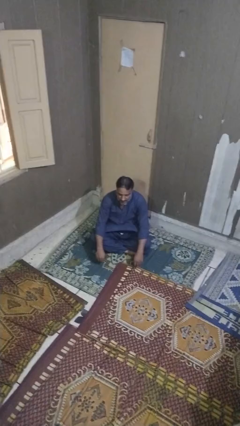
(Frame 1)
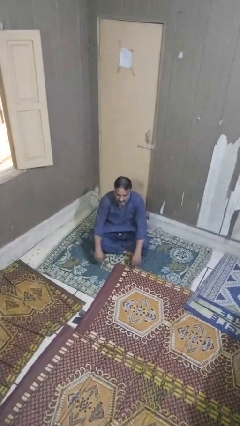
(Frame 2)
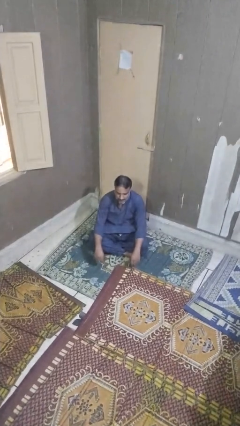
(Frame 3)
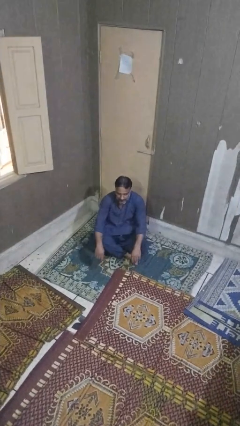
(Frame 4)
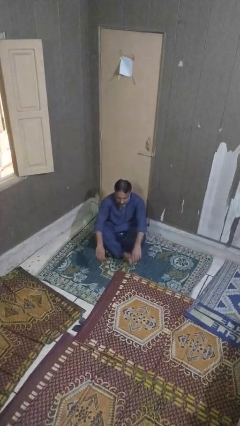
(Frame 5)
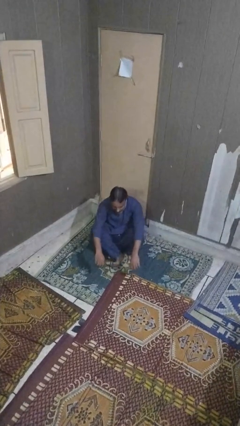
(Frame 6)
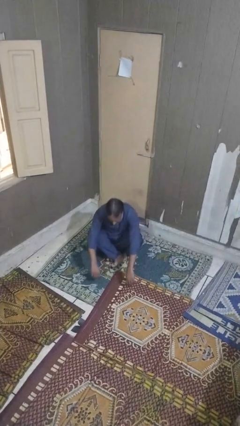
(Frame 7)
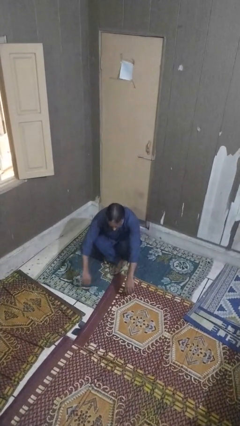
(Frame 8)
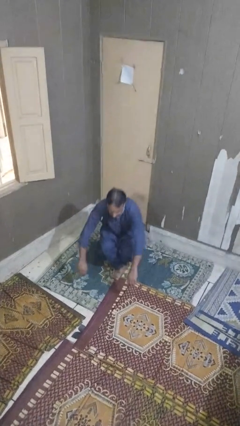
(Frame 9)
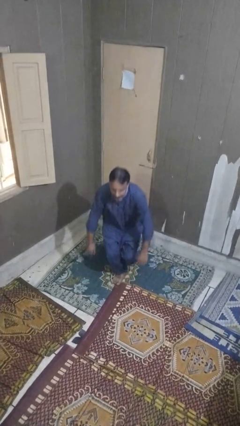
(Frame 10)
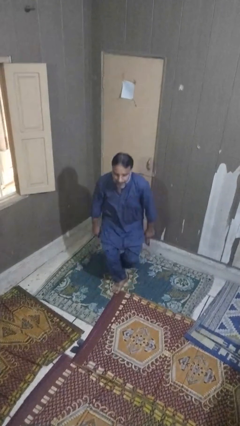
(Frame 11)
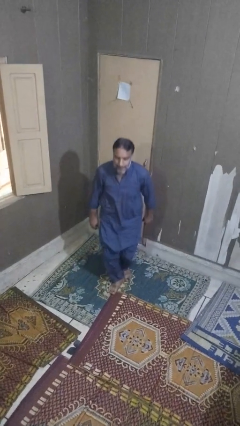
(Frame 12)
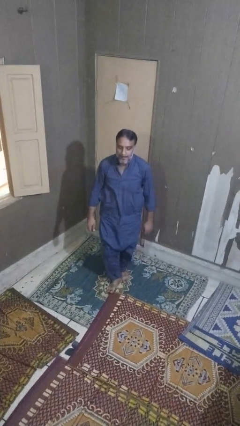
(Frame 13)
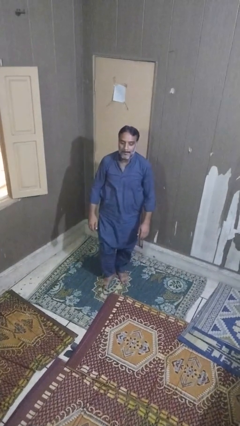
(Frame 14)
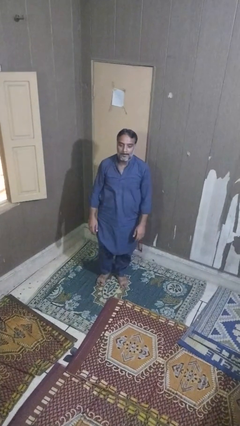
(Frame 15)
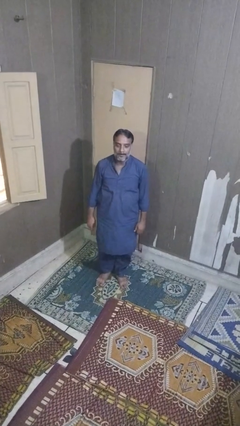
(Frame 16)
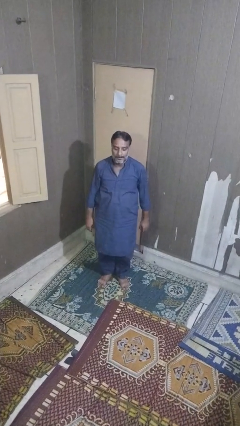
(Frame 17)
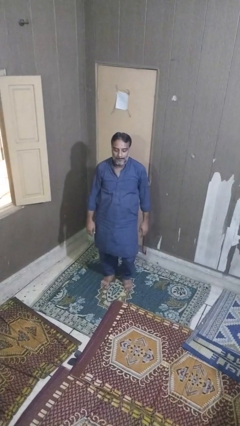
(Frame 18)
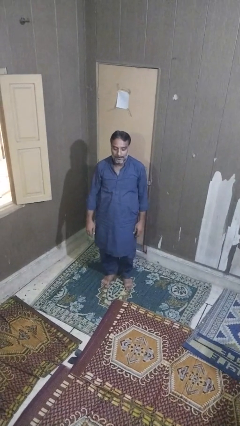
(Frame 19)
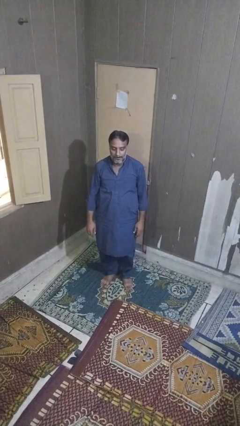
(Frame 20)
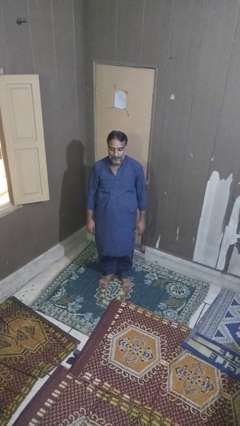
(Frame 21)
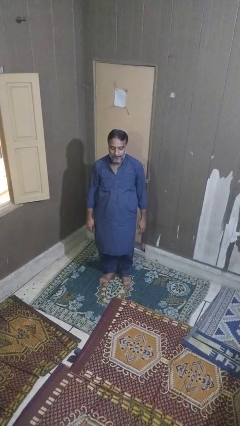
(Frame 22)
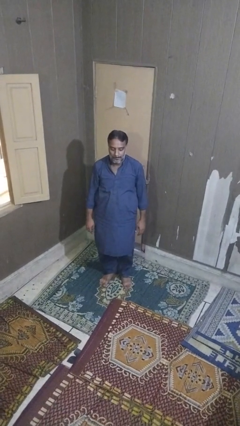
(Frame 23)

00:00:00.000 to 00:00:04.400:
person stands up from floor

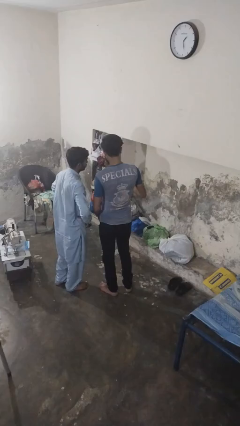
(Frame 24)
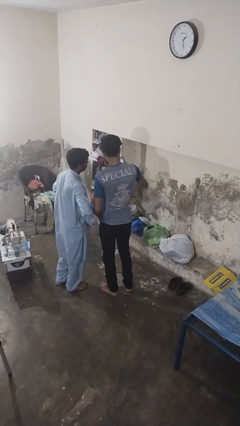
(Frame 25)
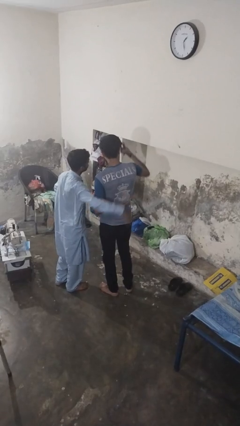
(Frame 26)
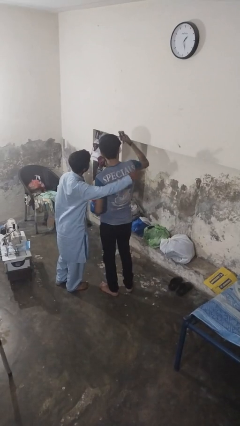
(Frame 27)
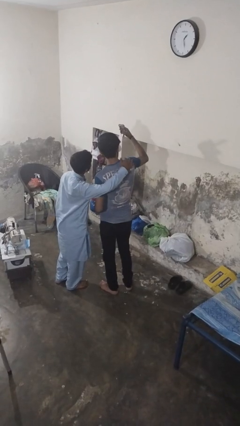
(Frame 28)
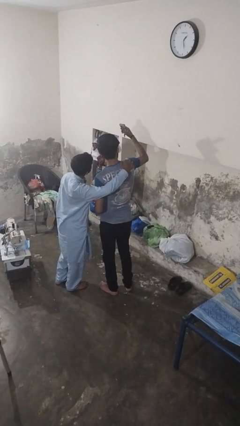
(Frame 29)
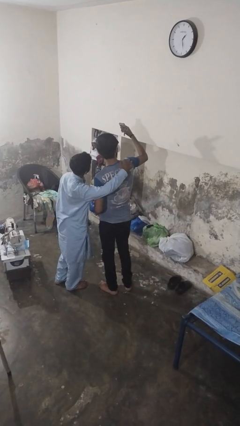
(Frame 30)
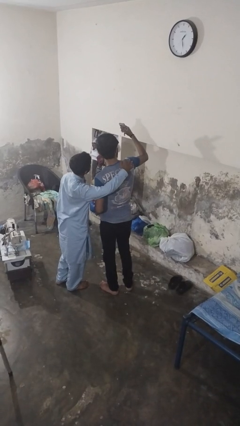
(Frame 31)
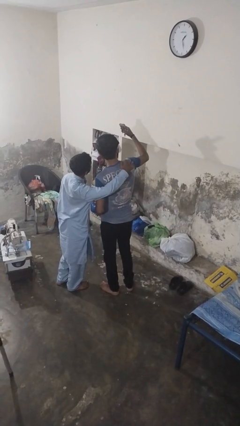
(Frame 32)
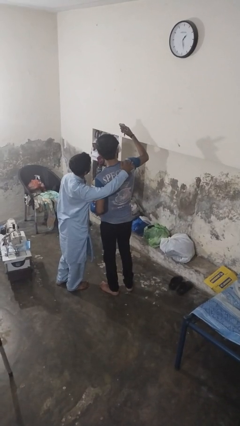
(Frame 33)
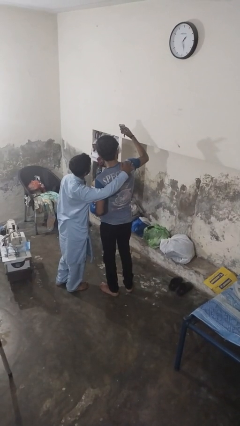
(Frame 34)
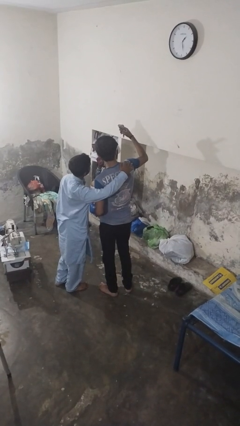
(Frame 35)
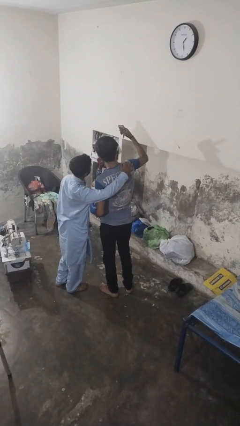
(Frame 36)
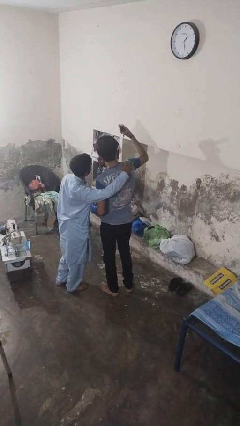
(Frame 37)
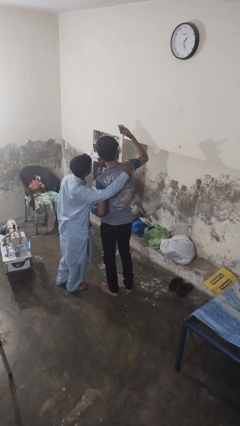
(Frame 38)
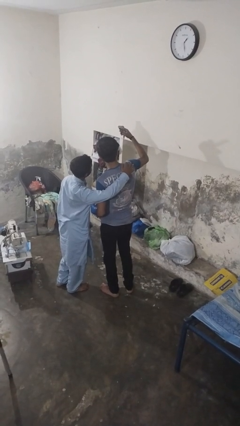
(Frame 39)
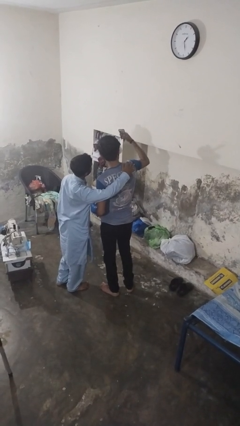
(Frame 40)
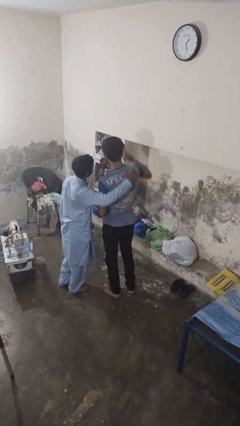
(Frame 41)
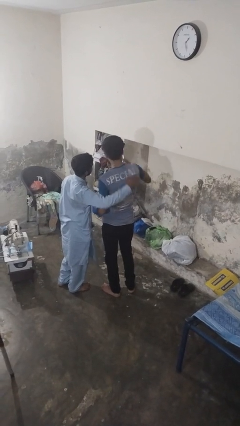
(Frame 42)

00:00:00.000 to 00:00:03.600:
person takes selfie with person

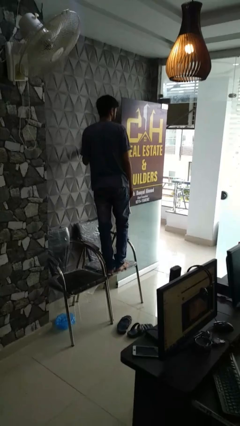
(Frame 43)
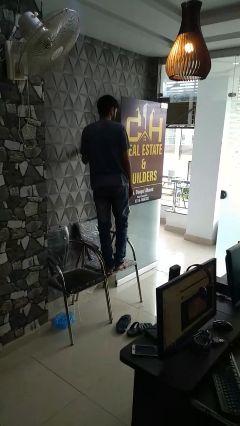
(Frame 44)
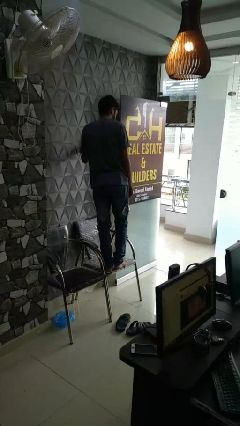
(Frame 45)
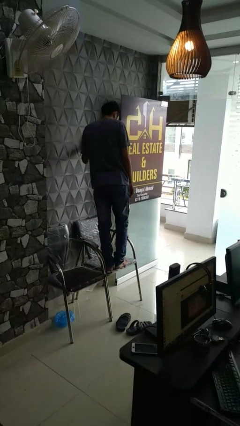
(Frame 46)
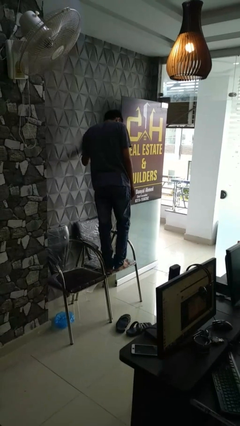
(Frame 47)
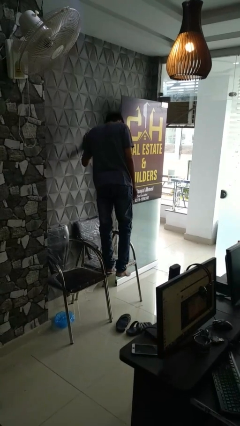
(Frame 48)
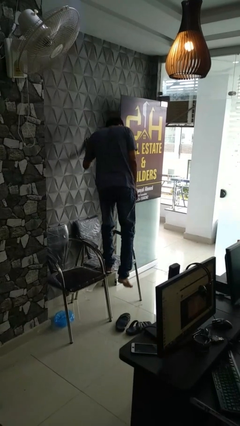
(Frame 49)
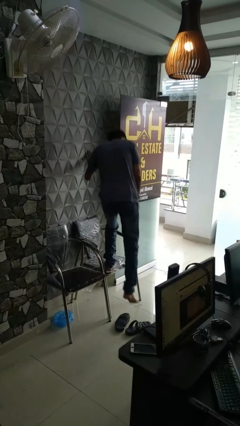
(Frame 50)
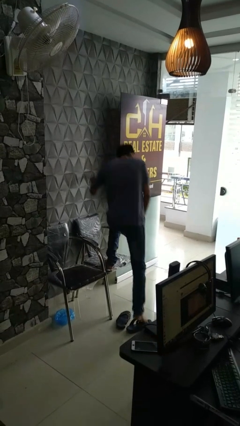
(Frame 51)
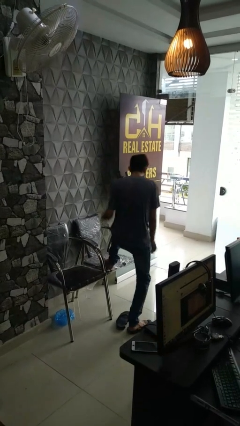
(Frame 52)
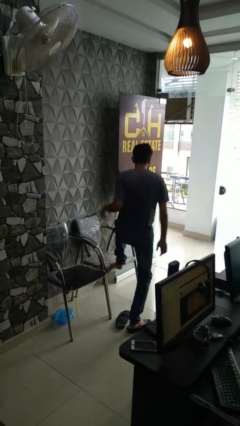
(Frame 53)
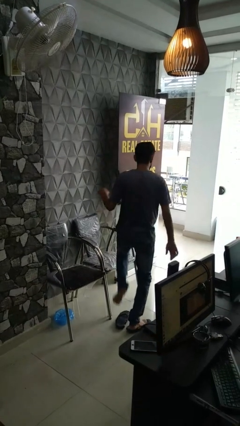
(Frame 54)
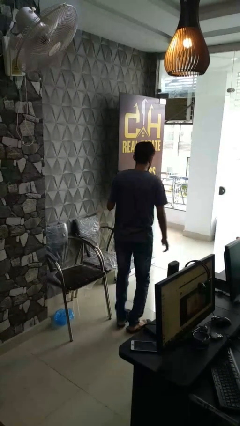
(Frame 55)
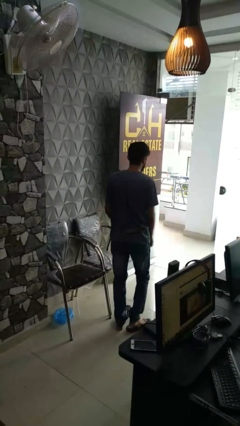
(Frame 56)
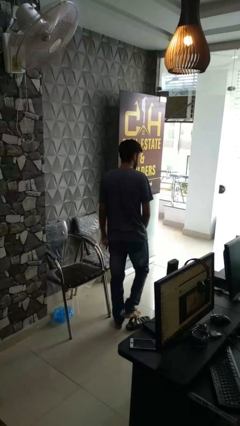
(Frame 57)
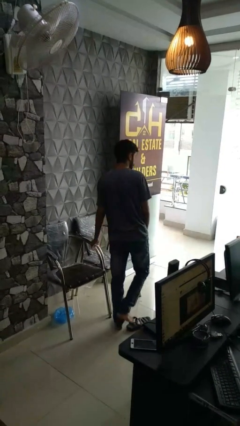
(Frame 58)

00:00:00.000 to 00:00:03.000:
person climbs off chair

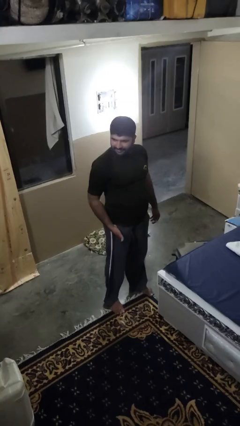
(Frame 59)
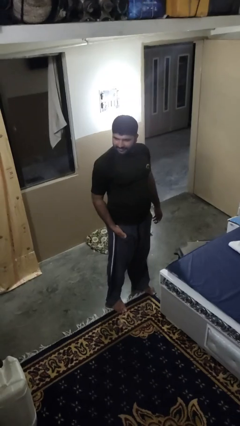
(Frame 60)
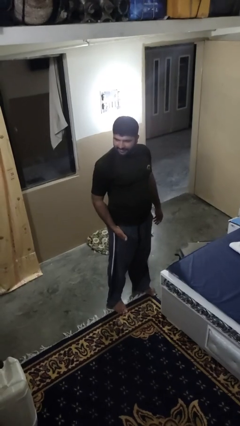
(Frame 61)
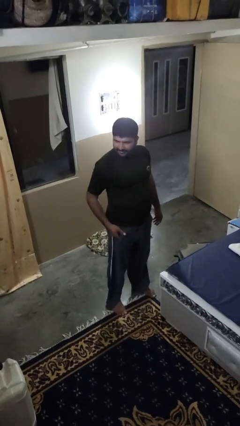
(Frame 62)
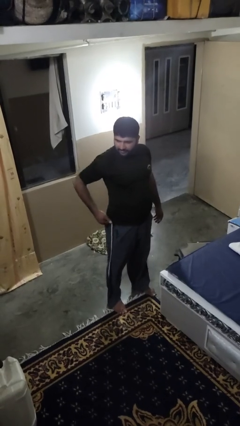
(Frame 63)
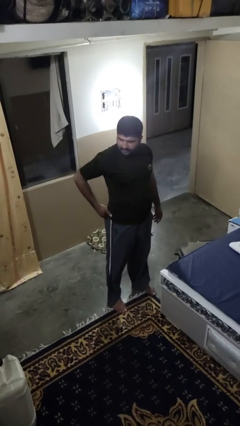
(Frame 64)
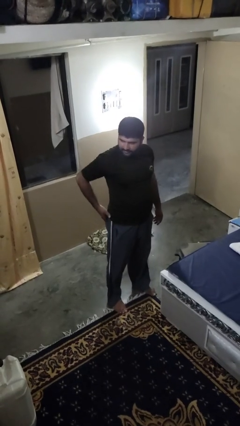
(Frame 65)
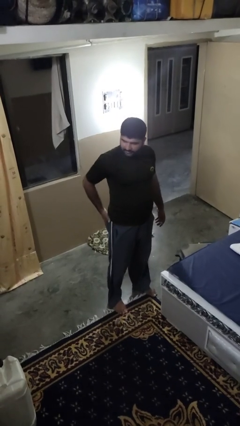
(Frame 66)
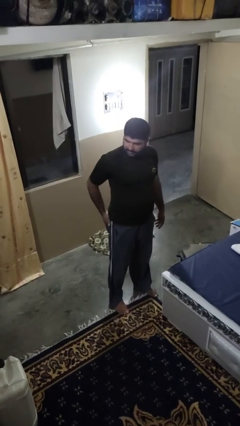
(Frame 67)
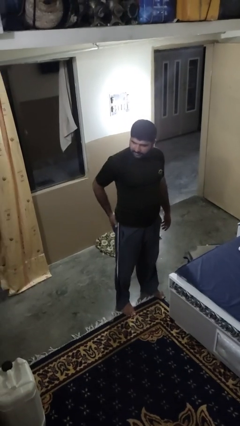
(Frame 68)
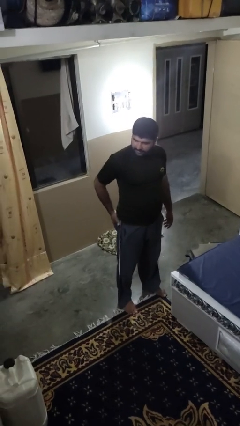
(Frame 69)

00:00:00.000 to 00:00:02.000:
person puts hands in back pockets

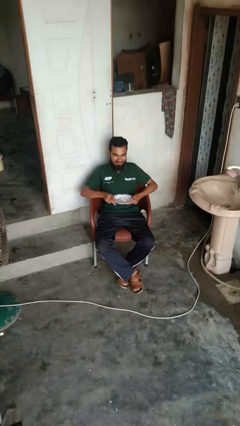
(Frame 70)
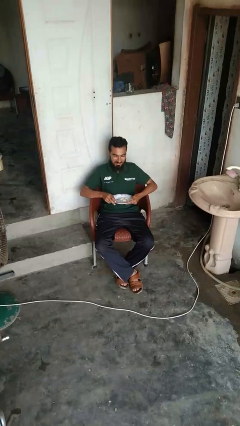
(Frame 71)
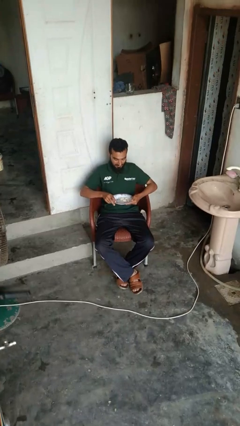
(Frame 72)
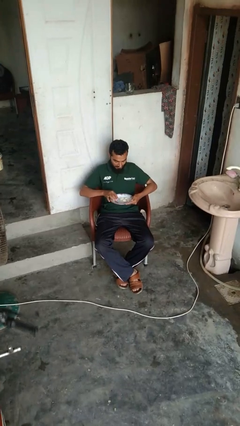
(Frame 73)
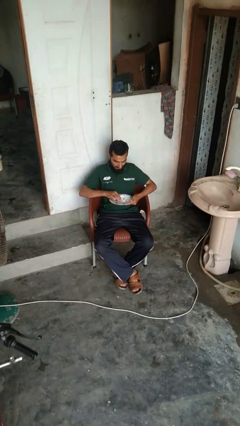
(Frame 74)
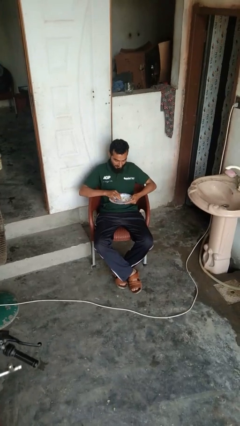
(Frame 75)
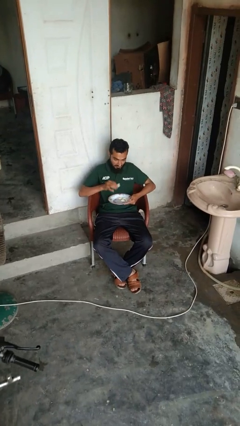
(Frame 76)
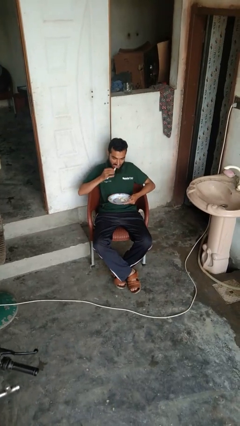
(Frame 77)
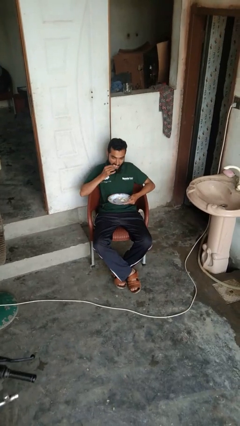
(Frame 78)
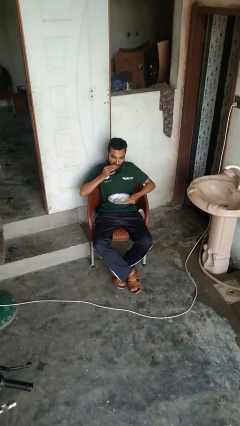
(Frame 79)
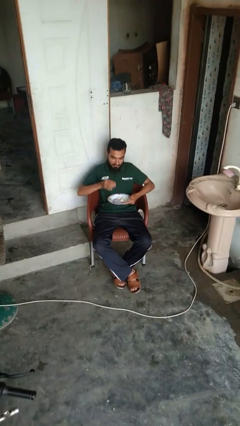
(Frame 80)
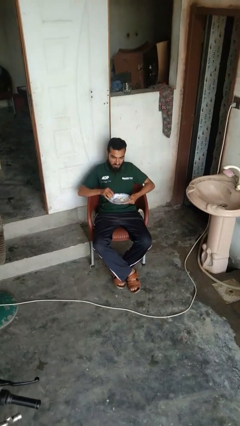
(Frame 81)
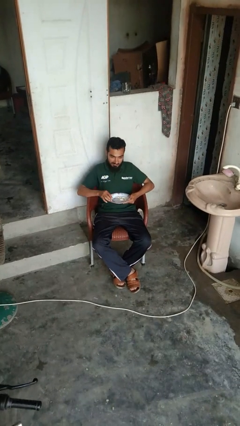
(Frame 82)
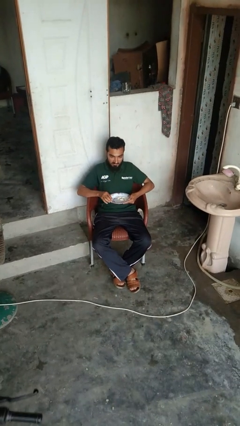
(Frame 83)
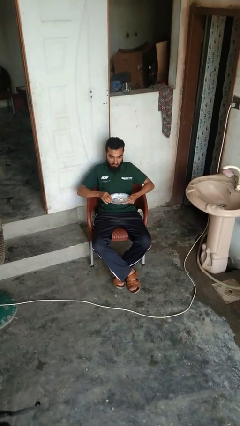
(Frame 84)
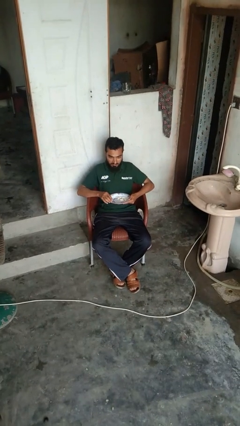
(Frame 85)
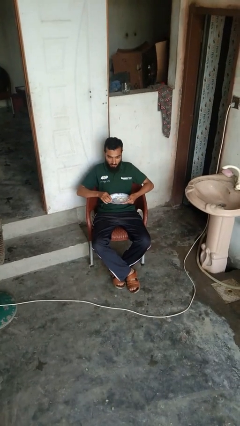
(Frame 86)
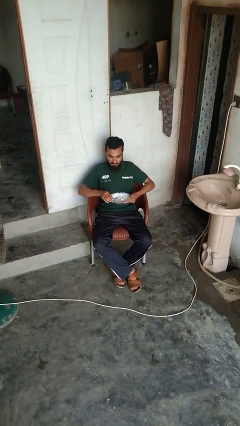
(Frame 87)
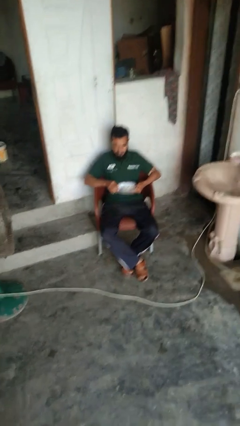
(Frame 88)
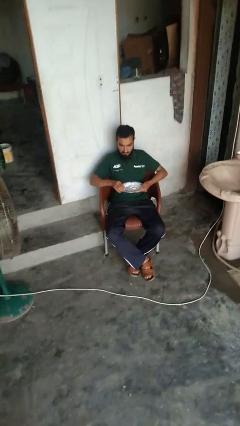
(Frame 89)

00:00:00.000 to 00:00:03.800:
person eats with hands

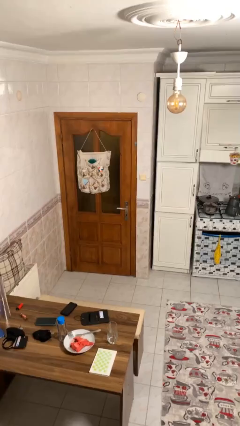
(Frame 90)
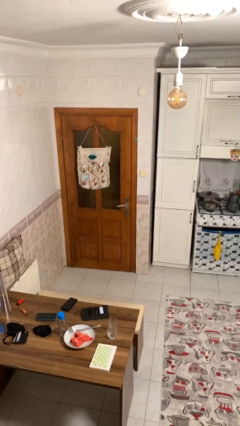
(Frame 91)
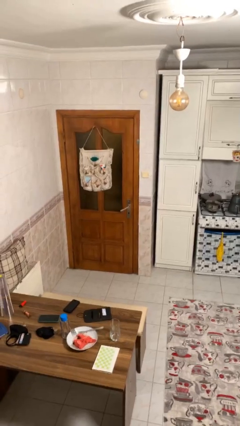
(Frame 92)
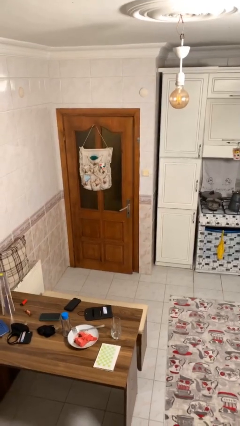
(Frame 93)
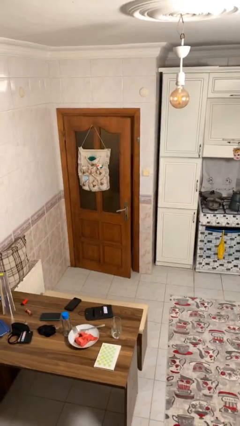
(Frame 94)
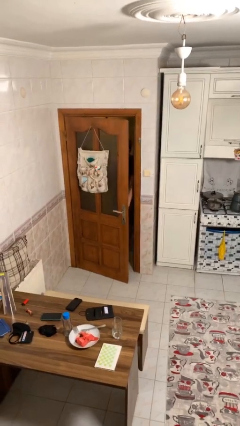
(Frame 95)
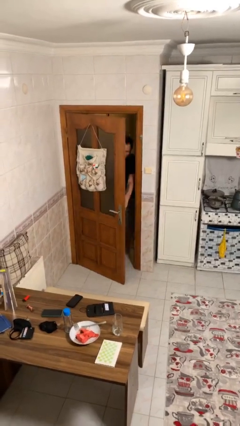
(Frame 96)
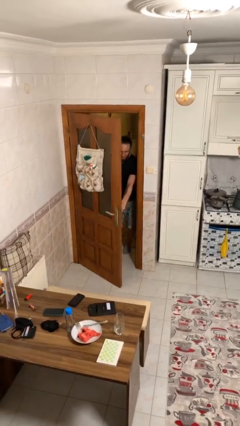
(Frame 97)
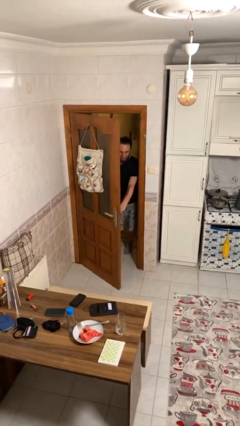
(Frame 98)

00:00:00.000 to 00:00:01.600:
person opens facility door
